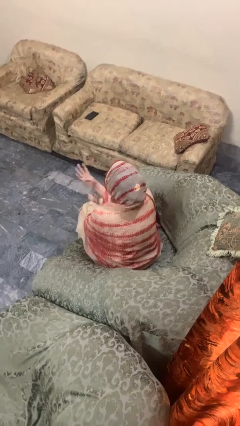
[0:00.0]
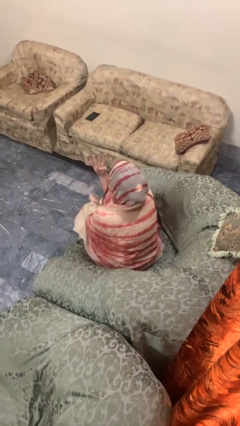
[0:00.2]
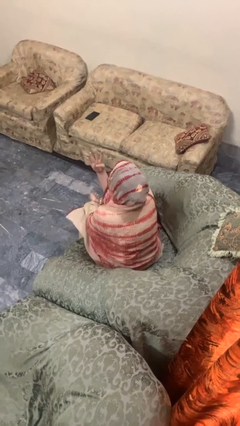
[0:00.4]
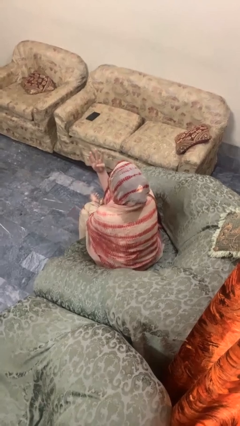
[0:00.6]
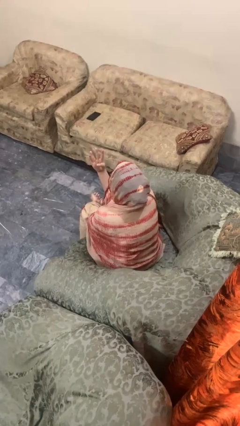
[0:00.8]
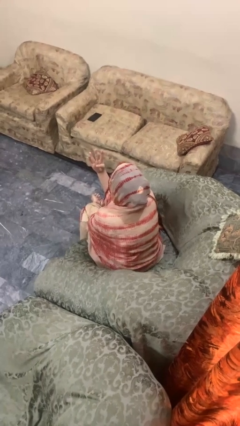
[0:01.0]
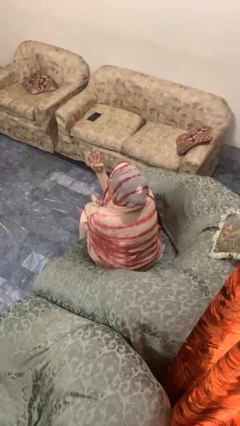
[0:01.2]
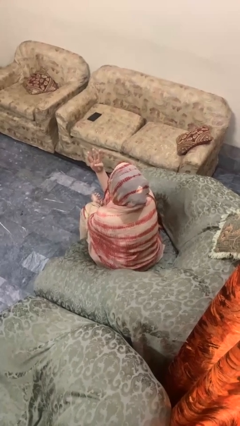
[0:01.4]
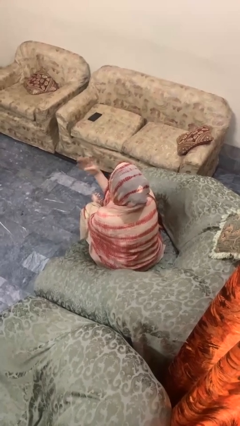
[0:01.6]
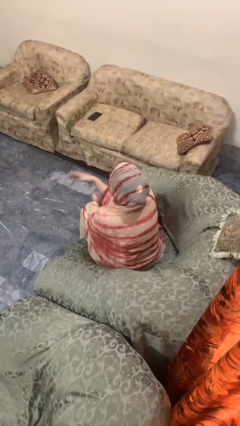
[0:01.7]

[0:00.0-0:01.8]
person gestures number four

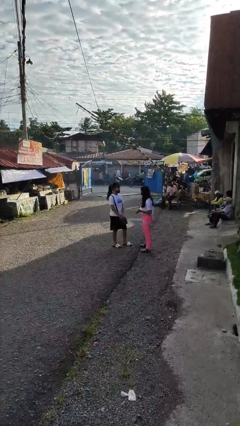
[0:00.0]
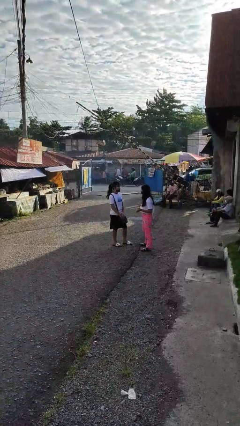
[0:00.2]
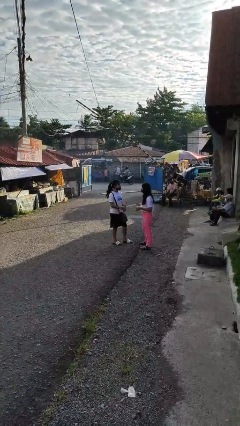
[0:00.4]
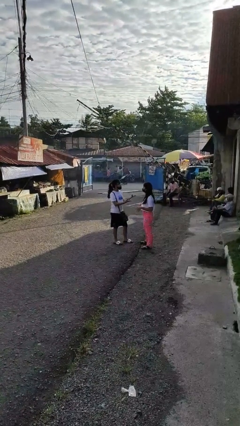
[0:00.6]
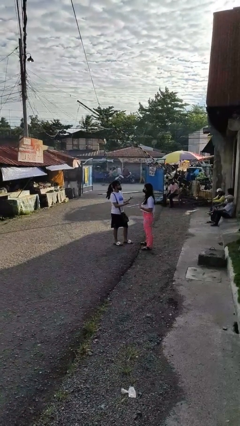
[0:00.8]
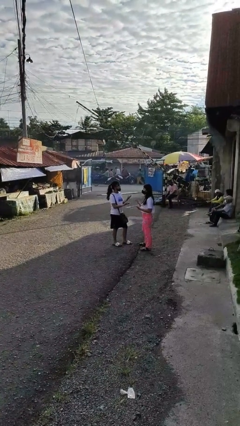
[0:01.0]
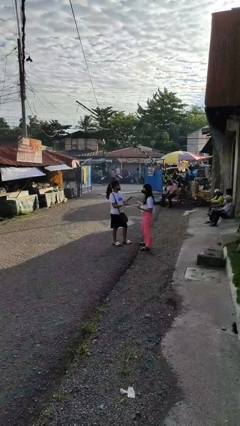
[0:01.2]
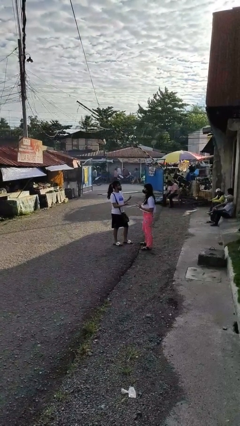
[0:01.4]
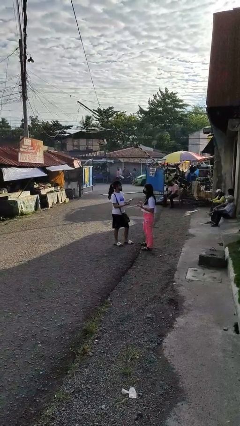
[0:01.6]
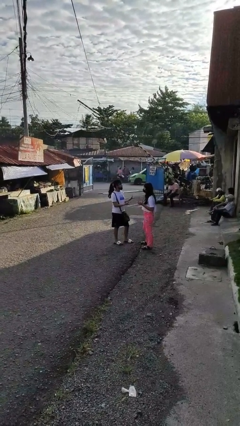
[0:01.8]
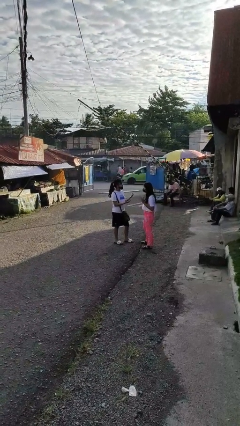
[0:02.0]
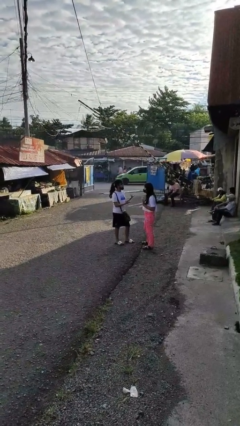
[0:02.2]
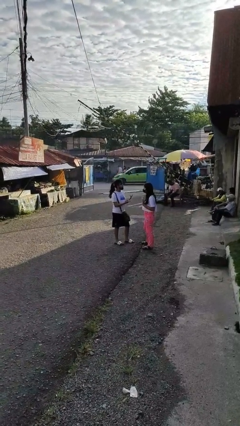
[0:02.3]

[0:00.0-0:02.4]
person talks to person

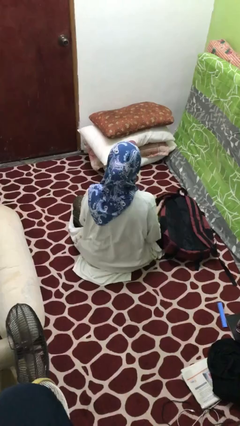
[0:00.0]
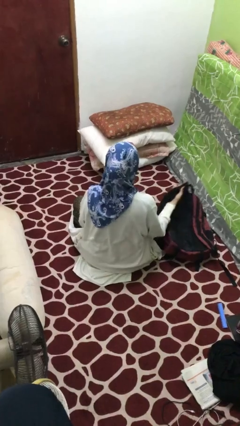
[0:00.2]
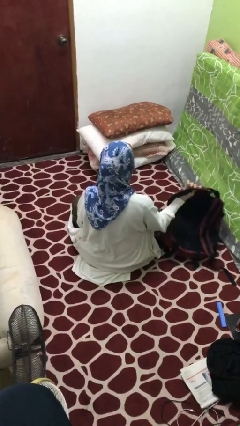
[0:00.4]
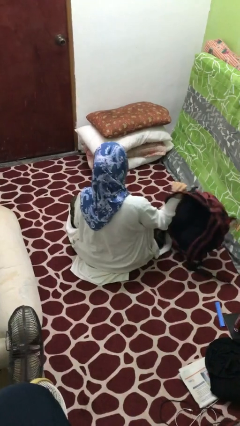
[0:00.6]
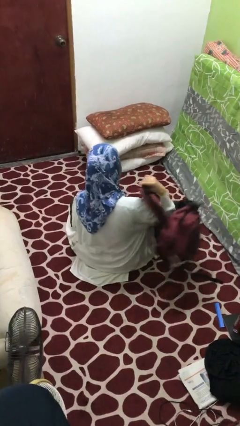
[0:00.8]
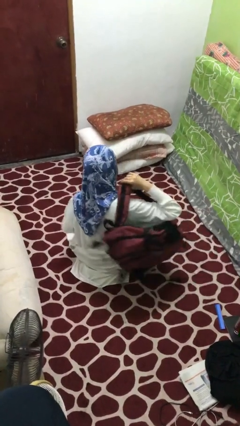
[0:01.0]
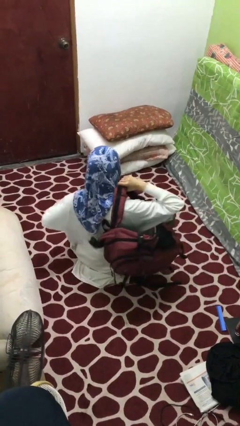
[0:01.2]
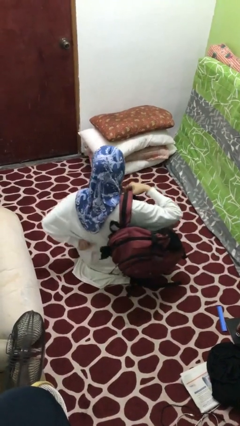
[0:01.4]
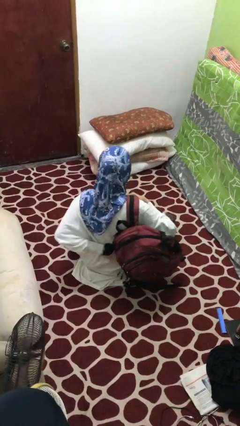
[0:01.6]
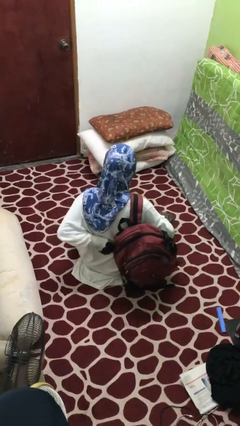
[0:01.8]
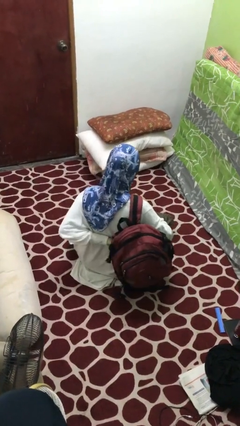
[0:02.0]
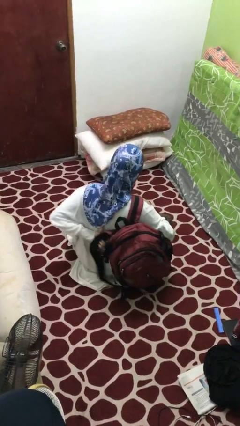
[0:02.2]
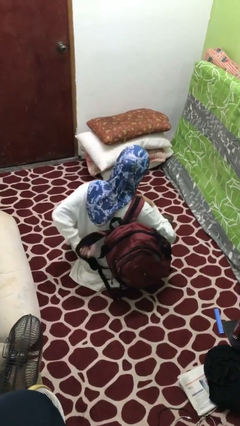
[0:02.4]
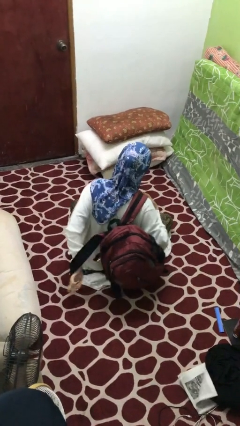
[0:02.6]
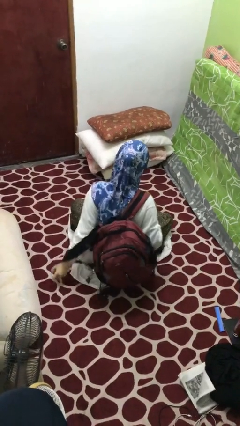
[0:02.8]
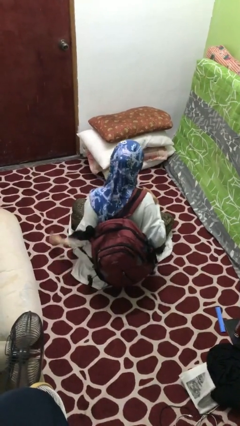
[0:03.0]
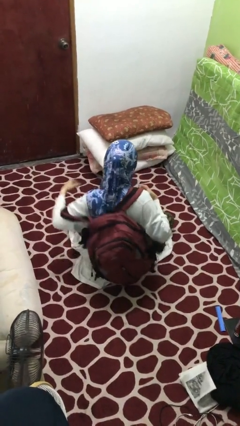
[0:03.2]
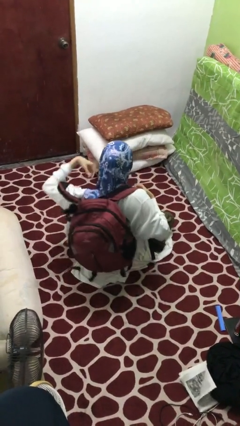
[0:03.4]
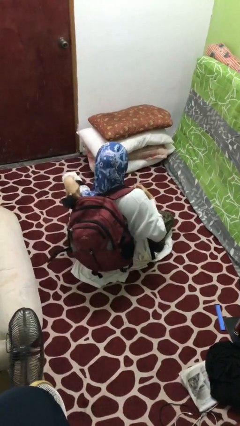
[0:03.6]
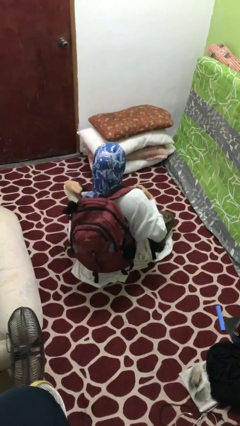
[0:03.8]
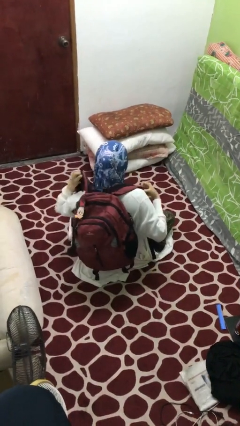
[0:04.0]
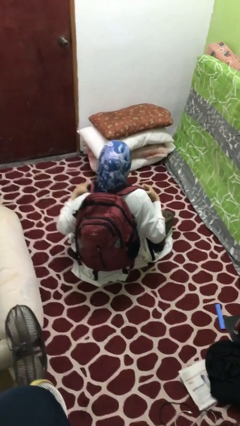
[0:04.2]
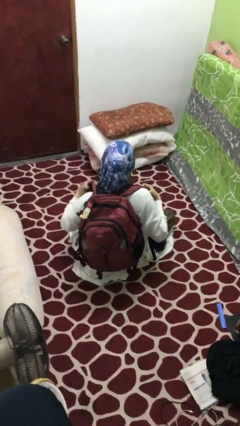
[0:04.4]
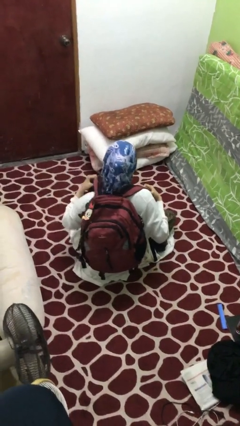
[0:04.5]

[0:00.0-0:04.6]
person puts on backpack

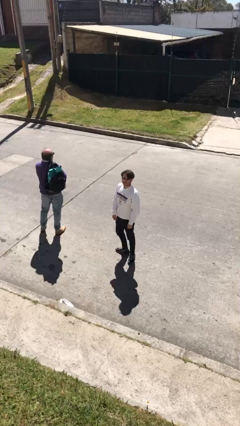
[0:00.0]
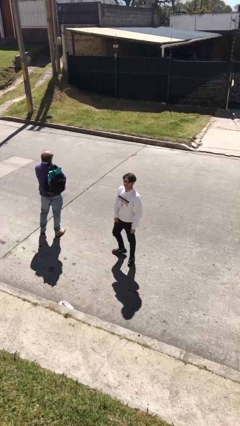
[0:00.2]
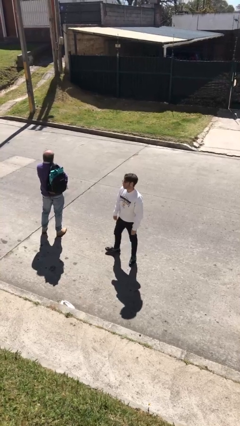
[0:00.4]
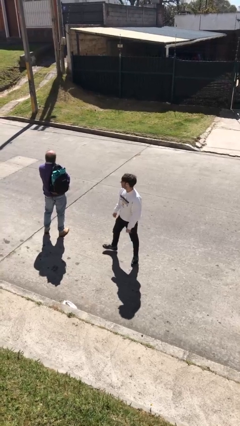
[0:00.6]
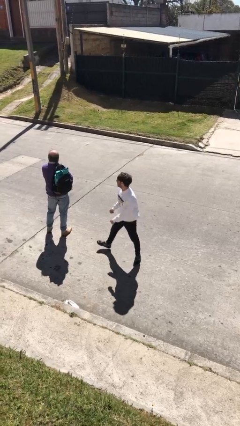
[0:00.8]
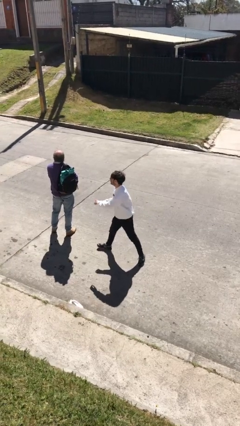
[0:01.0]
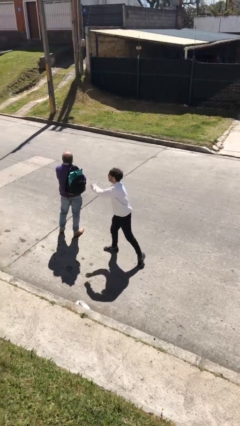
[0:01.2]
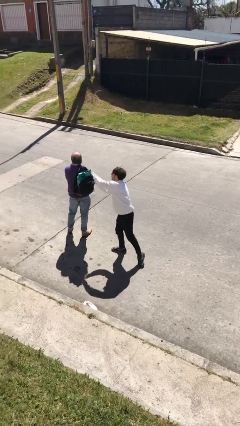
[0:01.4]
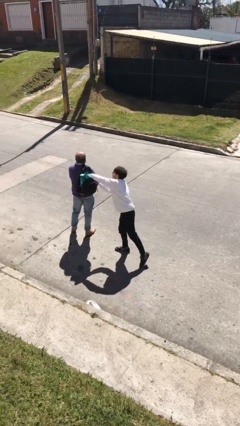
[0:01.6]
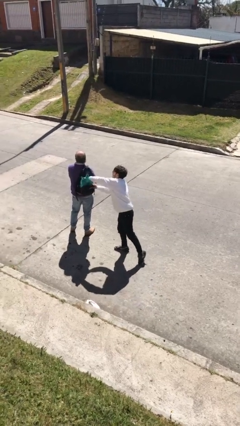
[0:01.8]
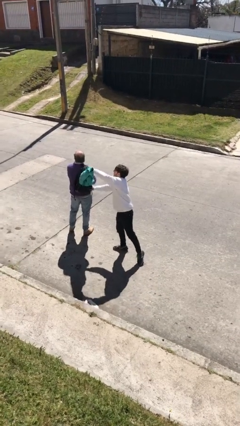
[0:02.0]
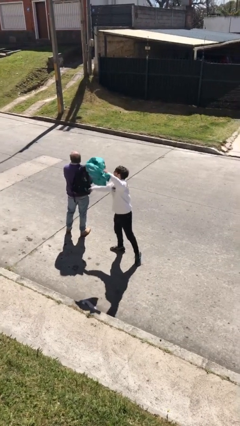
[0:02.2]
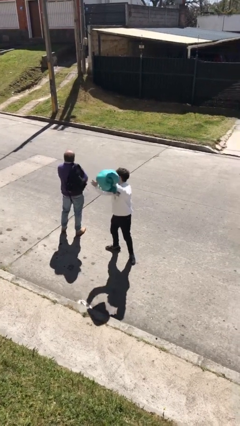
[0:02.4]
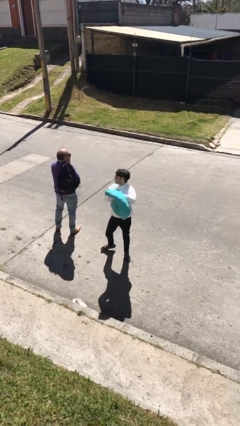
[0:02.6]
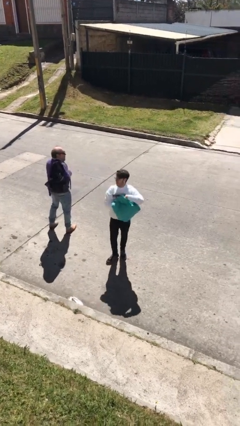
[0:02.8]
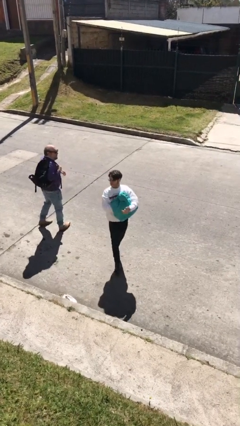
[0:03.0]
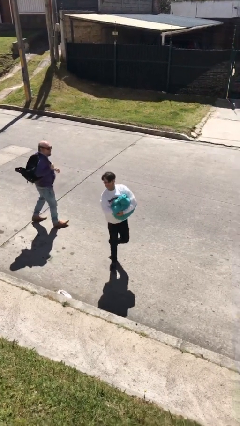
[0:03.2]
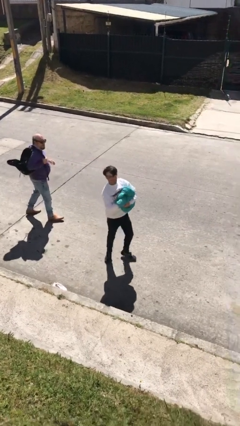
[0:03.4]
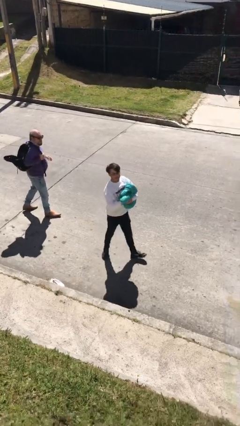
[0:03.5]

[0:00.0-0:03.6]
person steals object from person

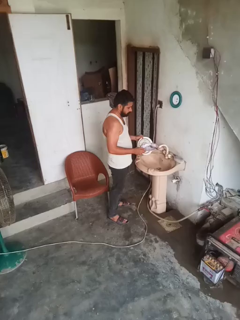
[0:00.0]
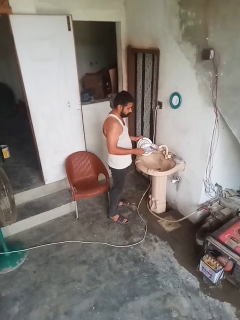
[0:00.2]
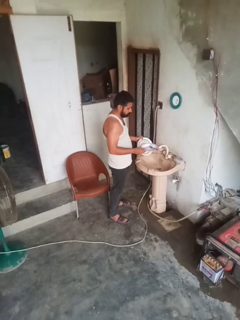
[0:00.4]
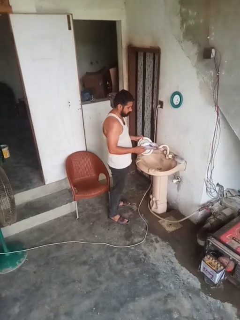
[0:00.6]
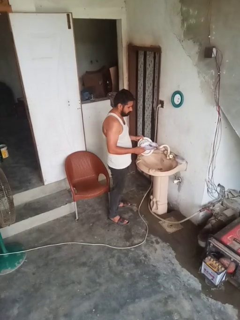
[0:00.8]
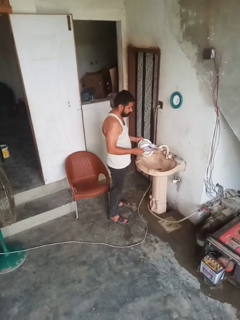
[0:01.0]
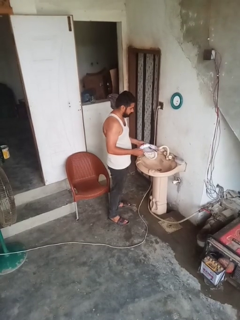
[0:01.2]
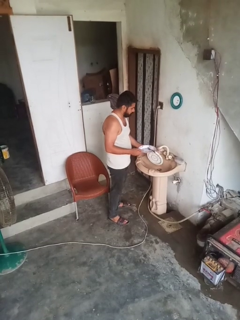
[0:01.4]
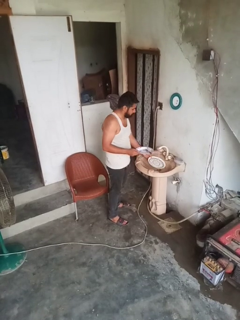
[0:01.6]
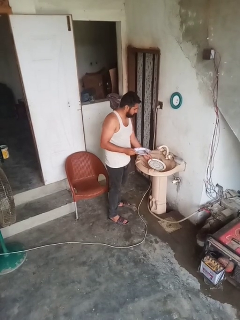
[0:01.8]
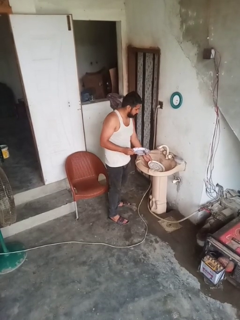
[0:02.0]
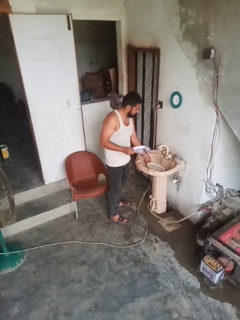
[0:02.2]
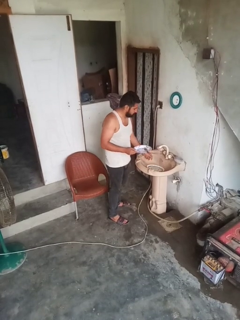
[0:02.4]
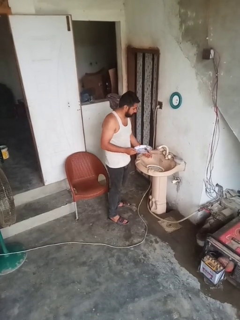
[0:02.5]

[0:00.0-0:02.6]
person loads dishwasher

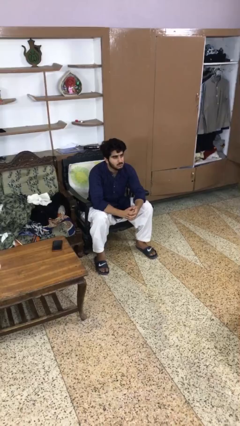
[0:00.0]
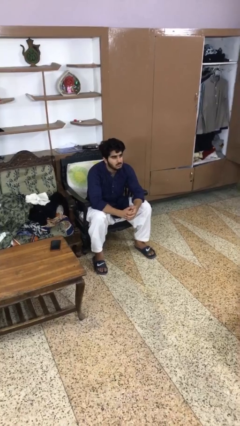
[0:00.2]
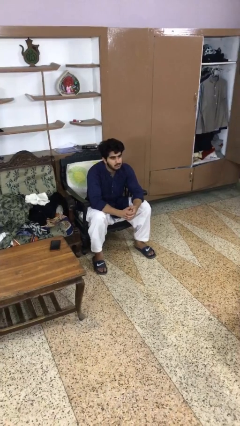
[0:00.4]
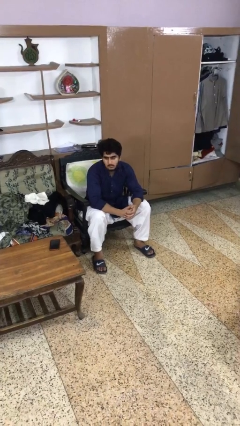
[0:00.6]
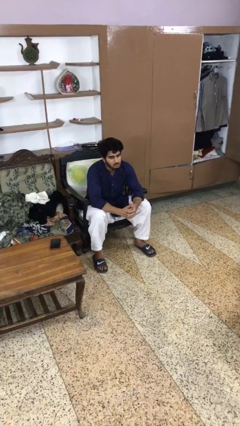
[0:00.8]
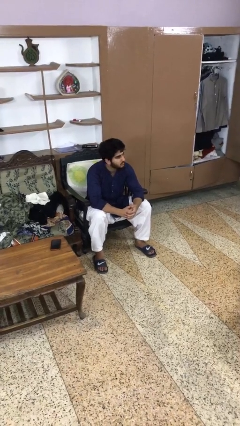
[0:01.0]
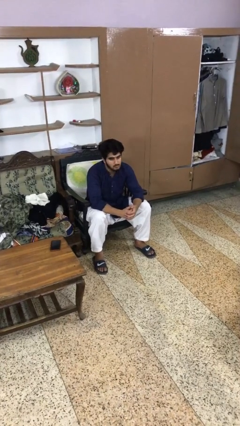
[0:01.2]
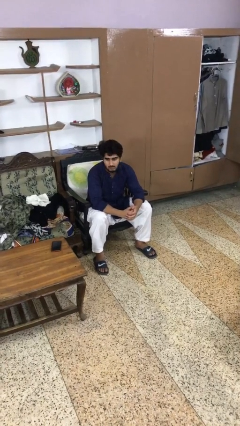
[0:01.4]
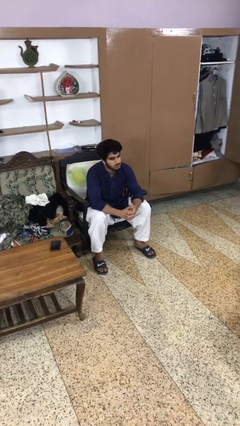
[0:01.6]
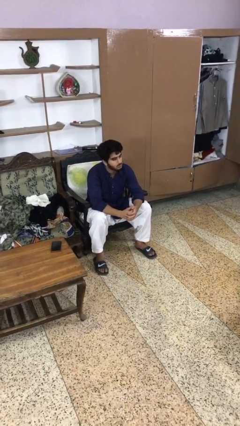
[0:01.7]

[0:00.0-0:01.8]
person shakes head

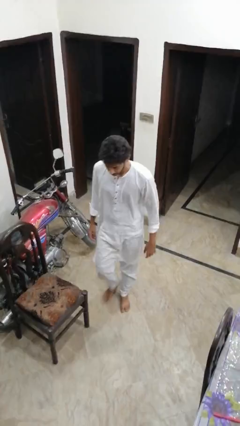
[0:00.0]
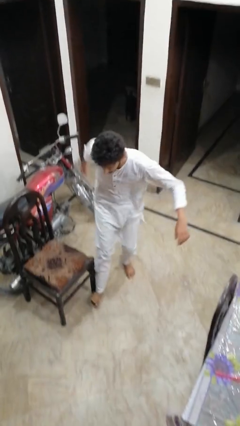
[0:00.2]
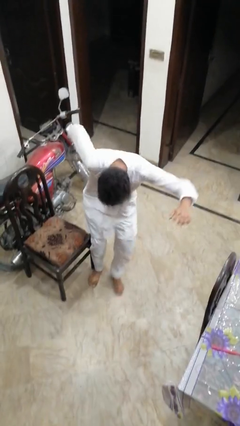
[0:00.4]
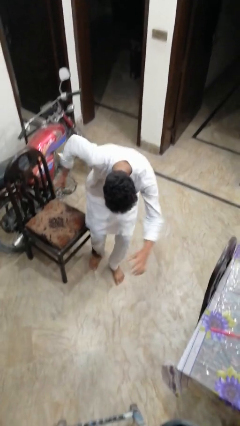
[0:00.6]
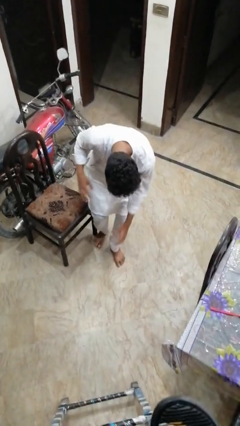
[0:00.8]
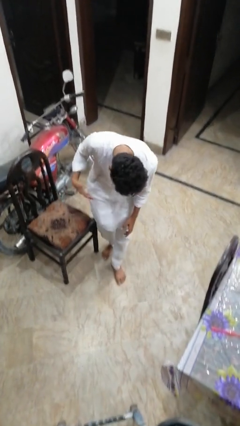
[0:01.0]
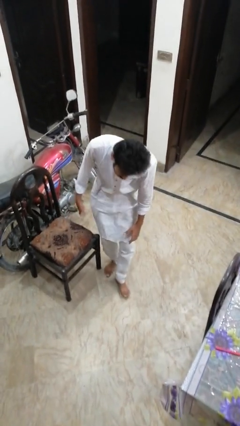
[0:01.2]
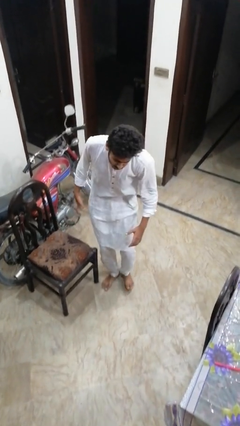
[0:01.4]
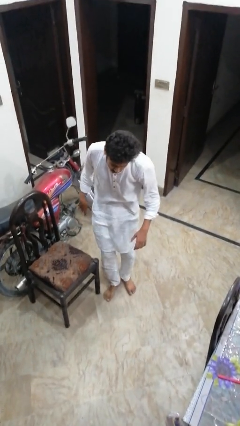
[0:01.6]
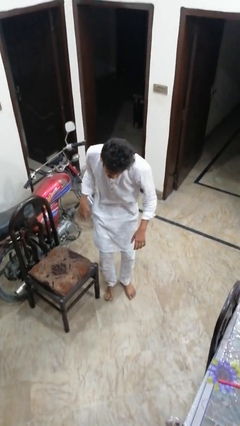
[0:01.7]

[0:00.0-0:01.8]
person stubs toe
